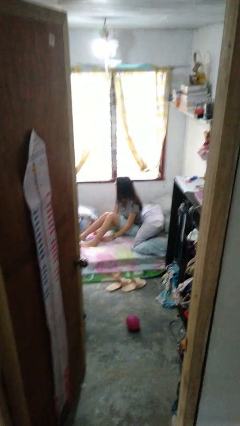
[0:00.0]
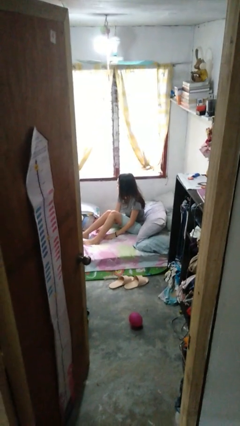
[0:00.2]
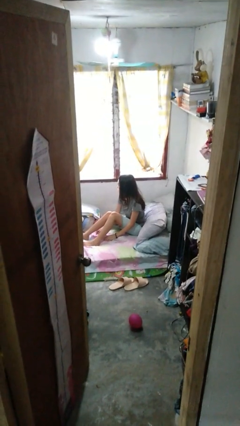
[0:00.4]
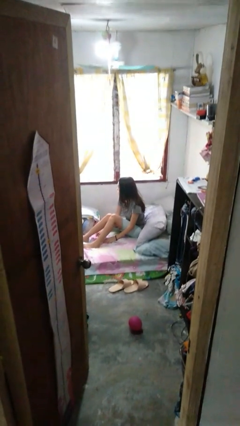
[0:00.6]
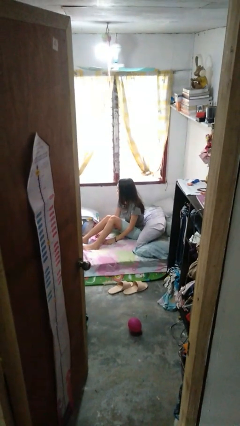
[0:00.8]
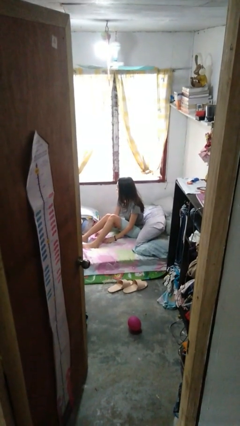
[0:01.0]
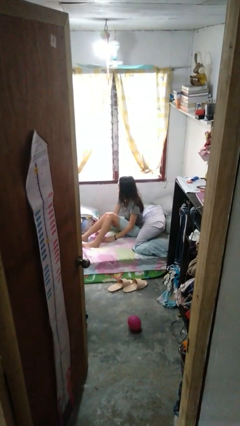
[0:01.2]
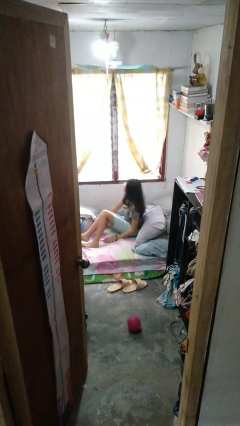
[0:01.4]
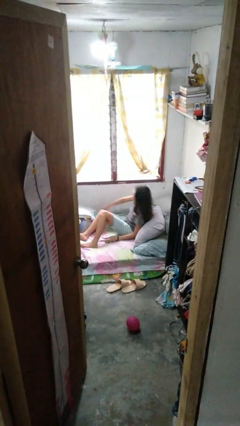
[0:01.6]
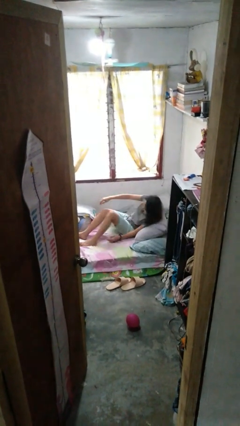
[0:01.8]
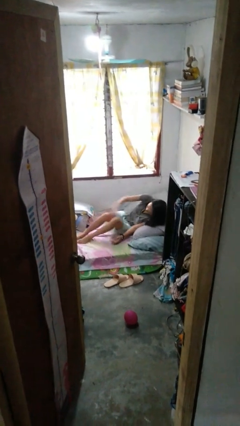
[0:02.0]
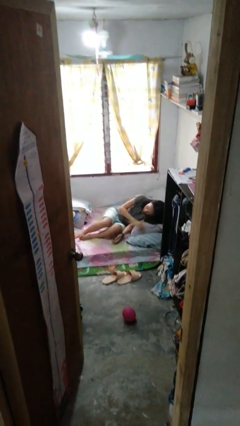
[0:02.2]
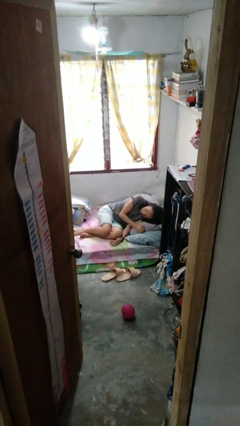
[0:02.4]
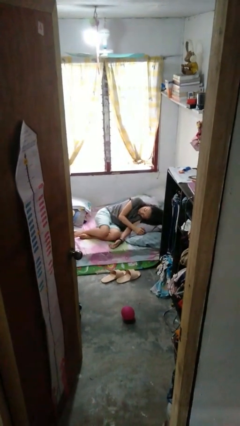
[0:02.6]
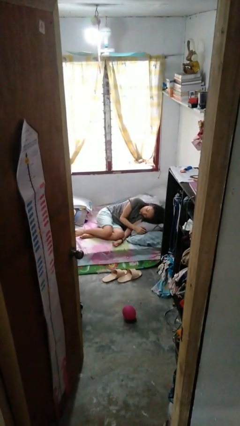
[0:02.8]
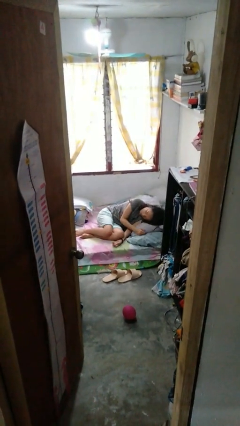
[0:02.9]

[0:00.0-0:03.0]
person lies down on bed

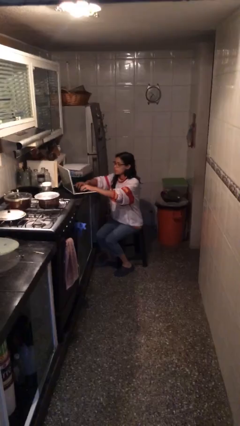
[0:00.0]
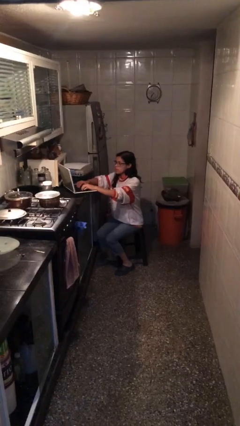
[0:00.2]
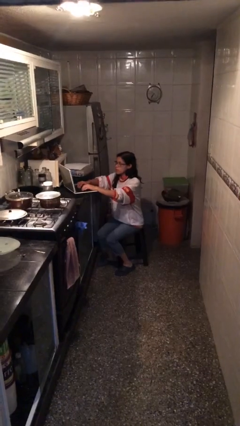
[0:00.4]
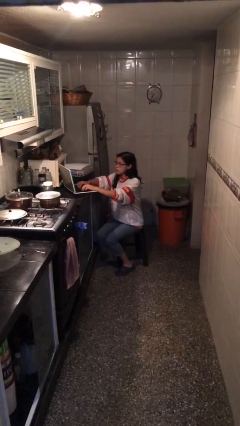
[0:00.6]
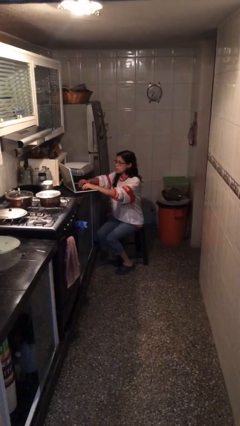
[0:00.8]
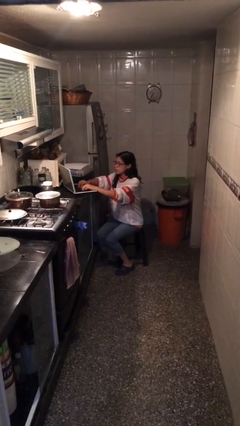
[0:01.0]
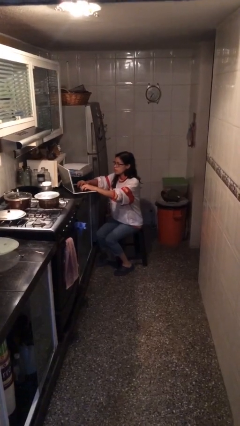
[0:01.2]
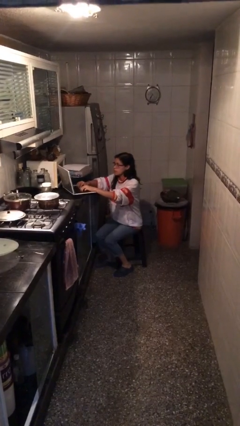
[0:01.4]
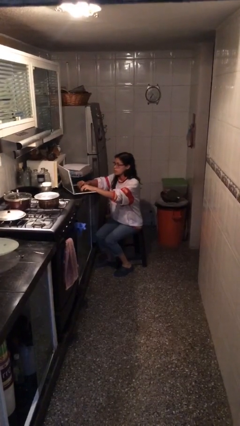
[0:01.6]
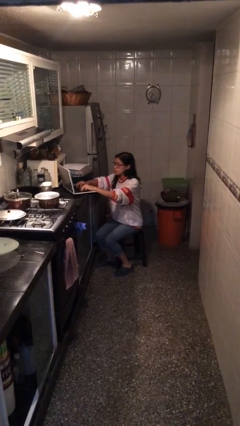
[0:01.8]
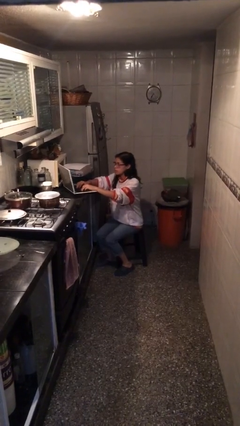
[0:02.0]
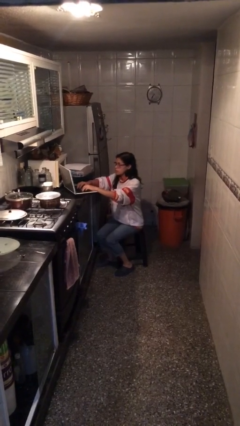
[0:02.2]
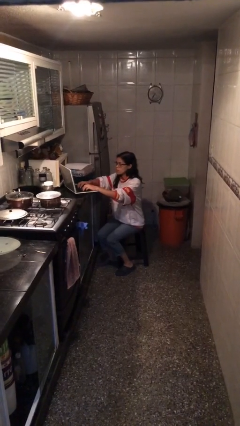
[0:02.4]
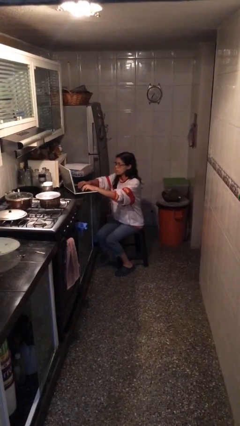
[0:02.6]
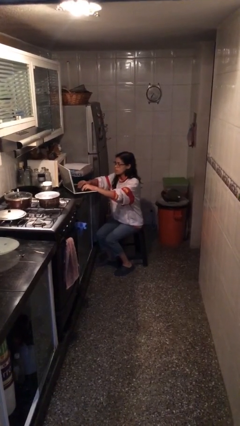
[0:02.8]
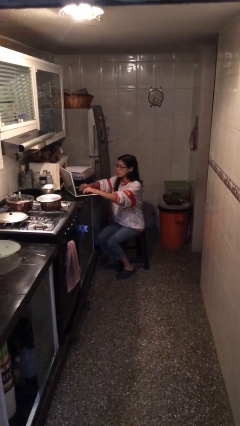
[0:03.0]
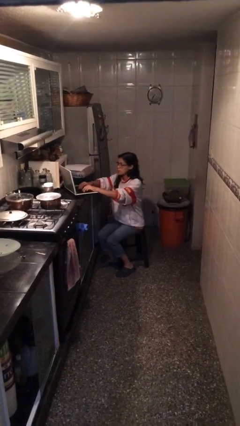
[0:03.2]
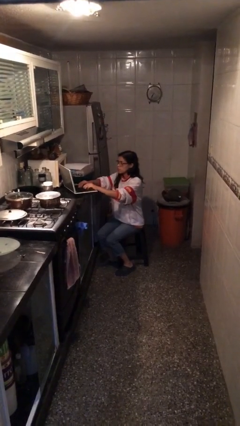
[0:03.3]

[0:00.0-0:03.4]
person interacts with laptop

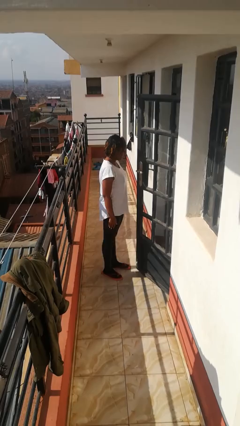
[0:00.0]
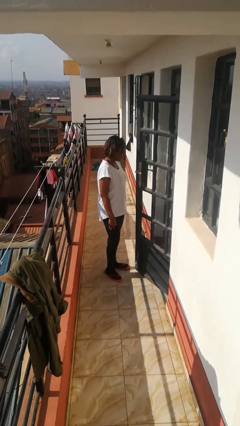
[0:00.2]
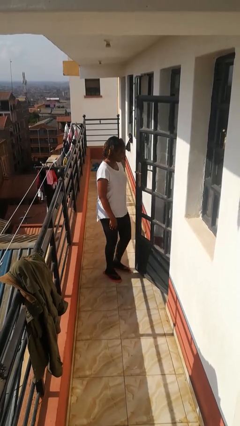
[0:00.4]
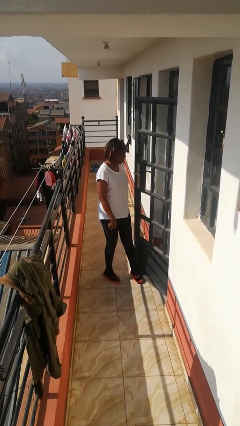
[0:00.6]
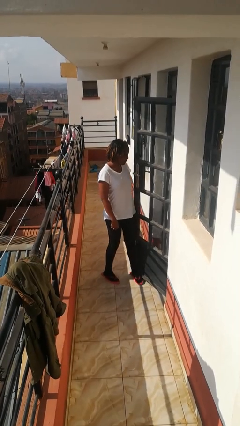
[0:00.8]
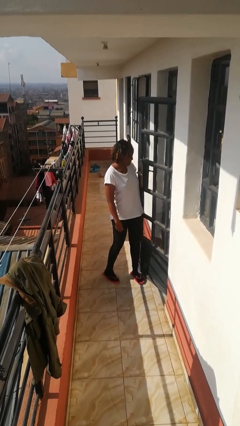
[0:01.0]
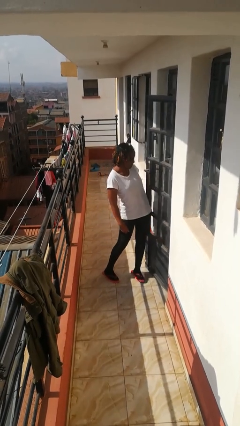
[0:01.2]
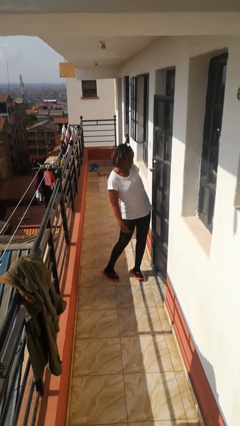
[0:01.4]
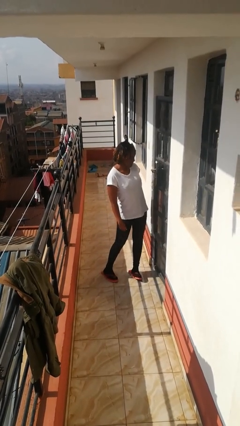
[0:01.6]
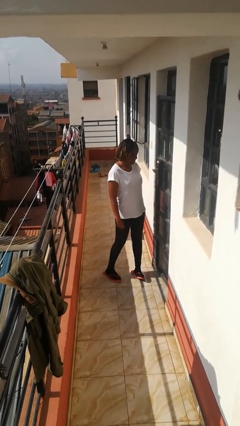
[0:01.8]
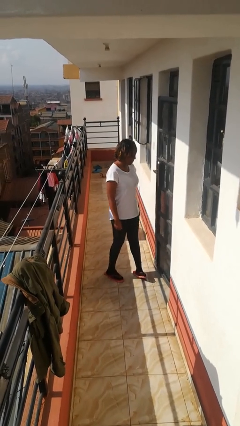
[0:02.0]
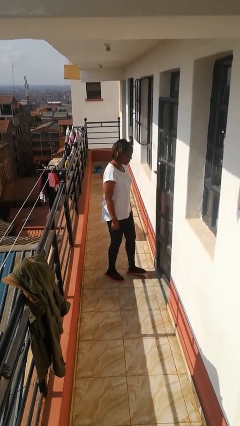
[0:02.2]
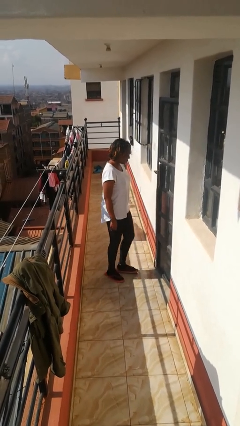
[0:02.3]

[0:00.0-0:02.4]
person closes door with hip

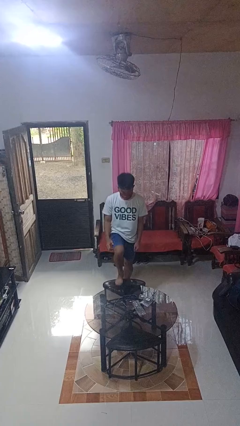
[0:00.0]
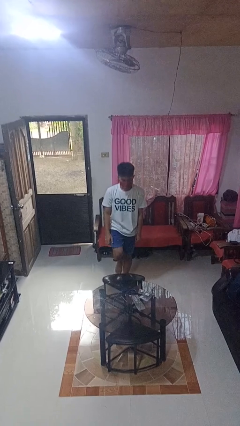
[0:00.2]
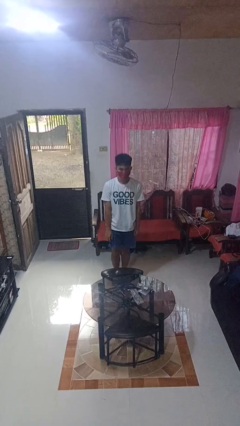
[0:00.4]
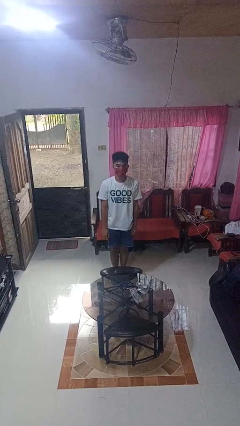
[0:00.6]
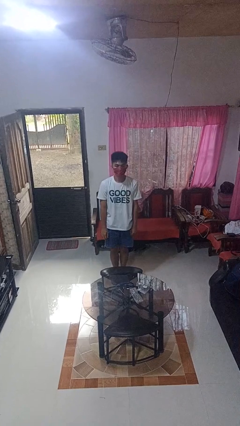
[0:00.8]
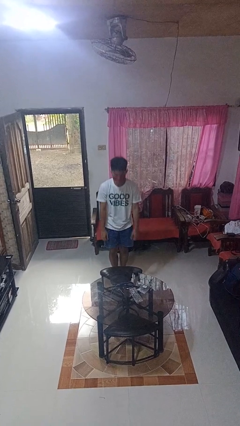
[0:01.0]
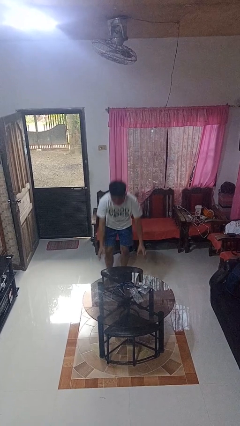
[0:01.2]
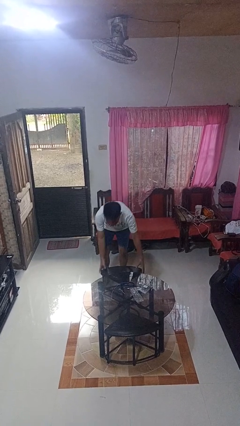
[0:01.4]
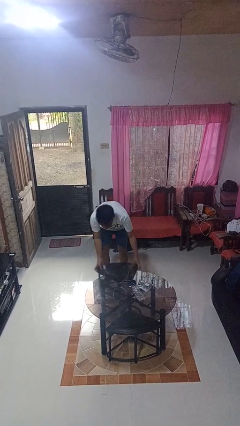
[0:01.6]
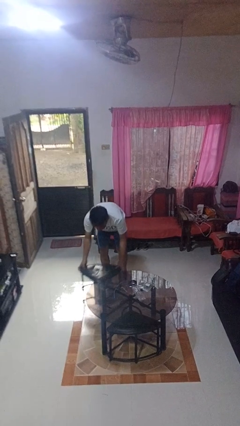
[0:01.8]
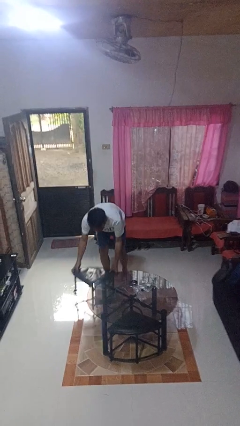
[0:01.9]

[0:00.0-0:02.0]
person climbs off chair

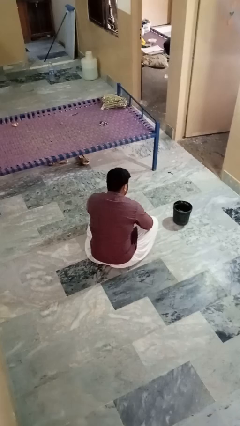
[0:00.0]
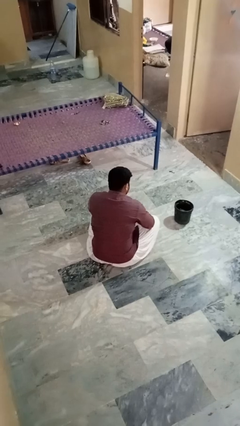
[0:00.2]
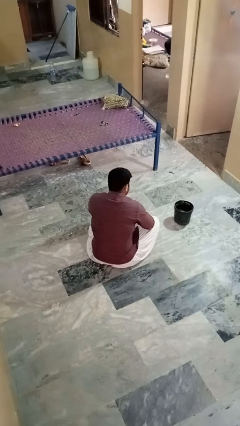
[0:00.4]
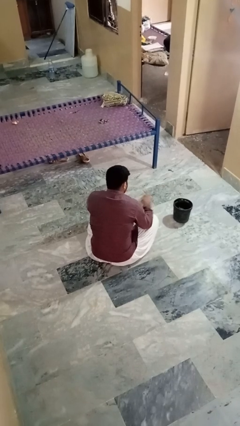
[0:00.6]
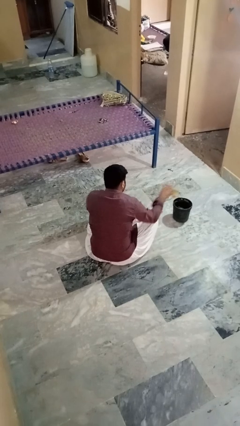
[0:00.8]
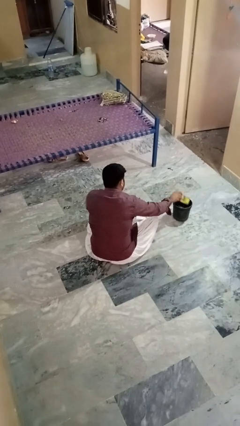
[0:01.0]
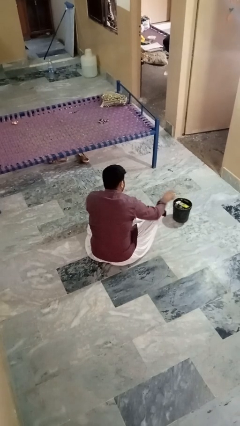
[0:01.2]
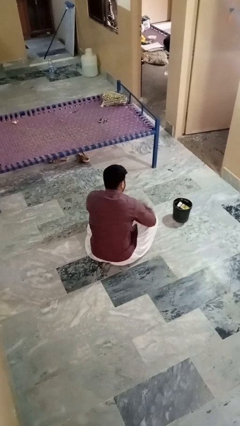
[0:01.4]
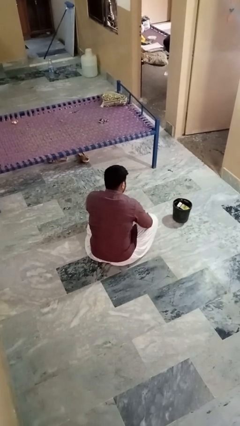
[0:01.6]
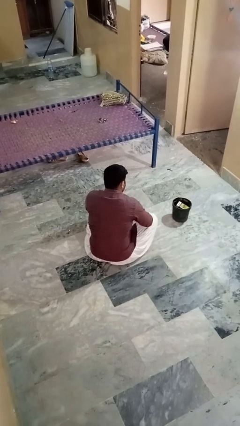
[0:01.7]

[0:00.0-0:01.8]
person puts object into basket

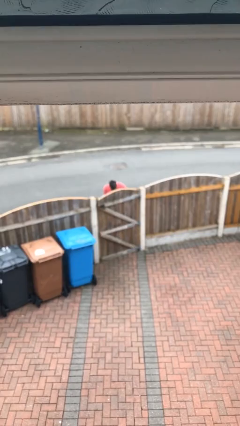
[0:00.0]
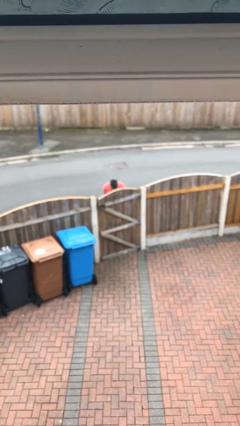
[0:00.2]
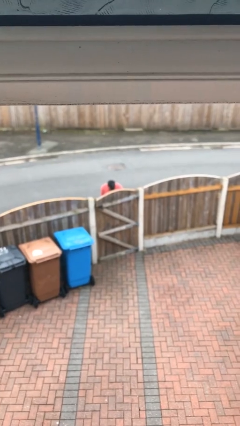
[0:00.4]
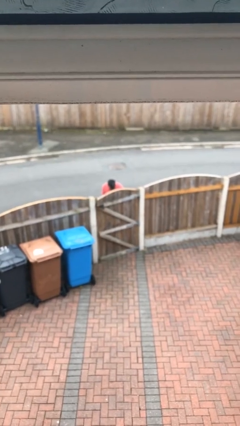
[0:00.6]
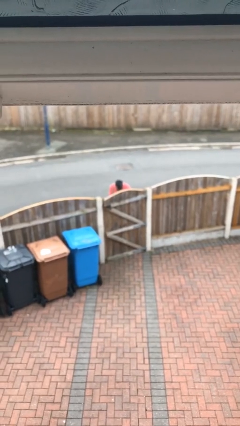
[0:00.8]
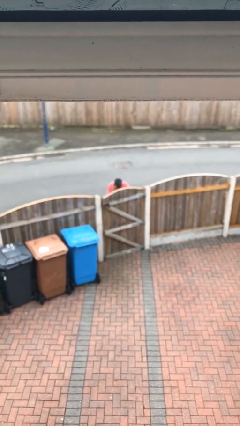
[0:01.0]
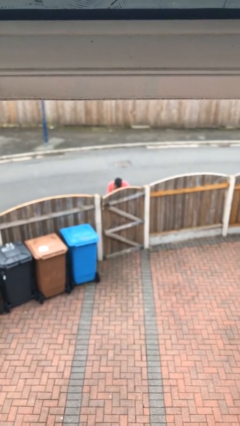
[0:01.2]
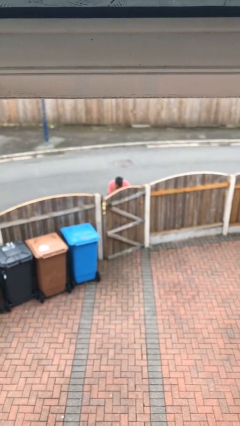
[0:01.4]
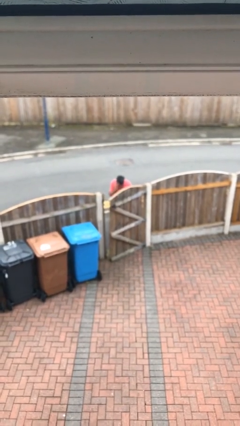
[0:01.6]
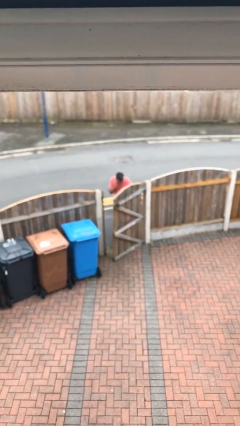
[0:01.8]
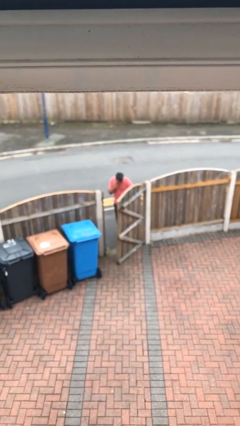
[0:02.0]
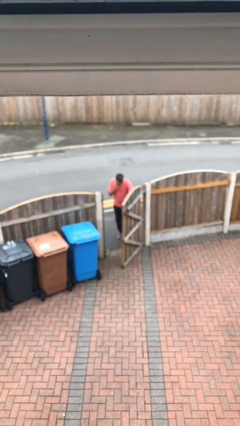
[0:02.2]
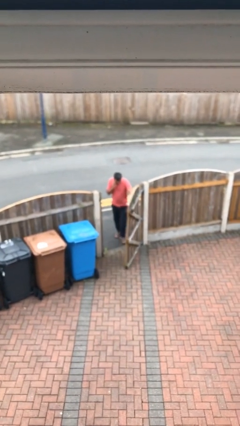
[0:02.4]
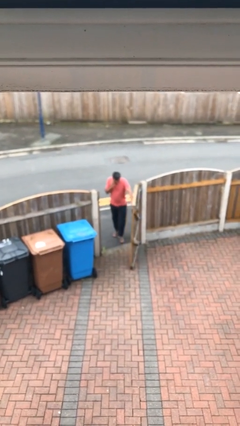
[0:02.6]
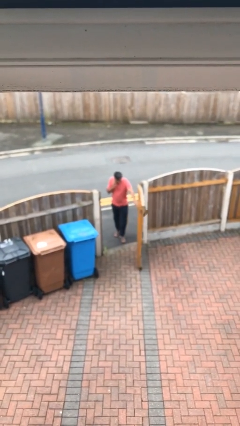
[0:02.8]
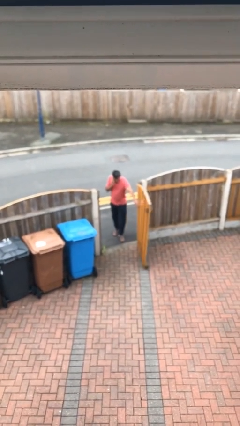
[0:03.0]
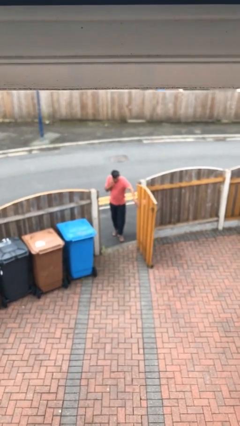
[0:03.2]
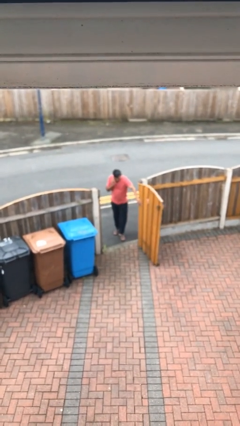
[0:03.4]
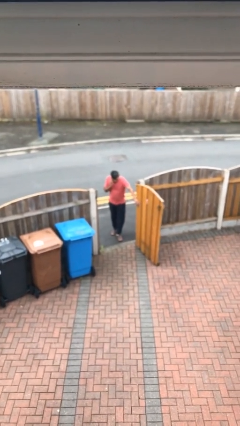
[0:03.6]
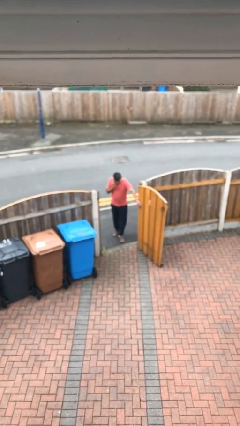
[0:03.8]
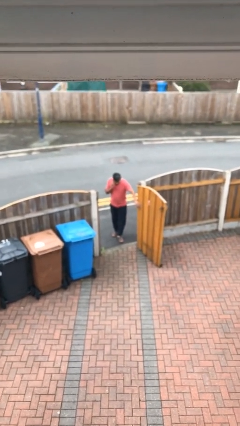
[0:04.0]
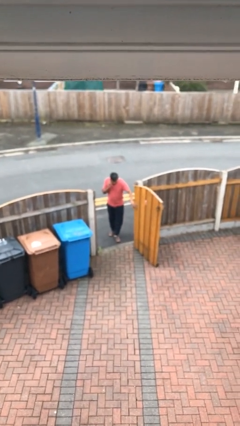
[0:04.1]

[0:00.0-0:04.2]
person opens facility door

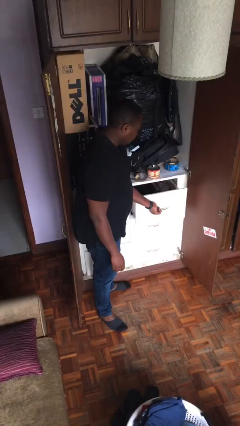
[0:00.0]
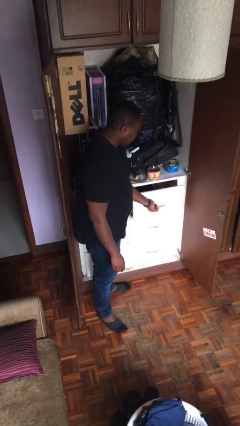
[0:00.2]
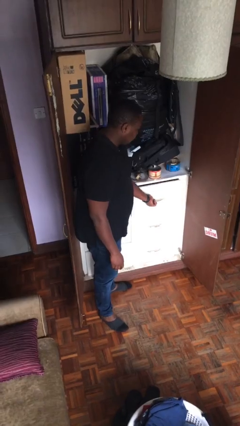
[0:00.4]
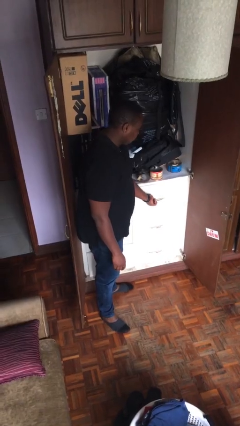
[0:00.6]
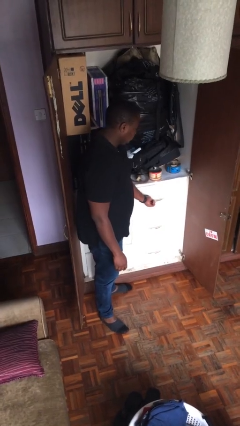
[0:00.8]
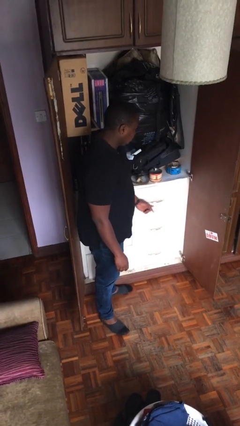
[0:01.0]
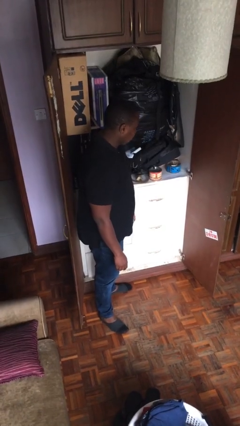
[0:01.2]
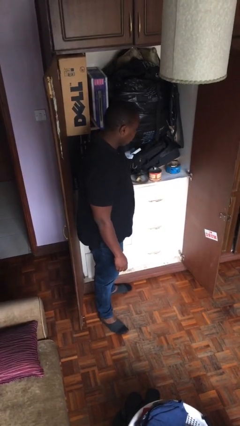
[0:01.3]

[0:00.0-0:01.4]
person closes dresser drawer
